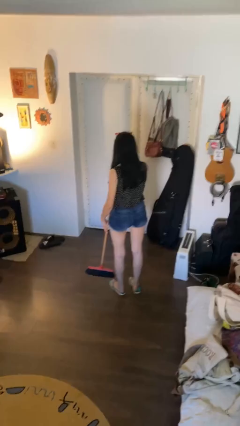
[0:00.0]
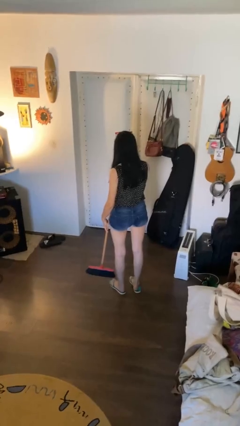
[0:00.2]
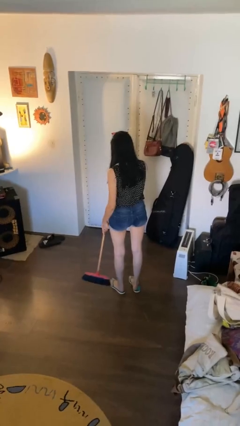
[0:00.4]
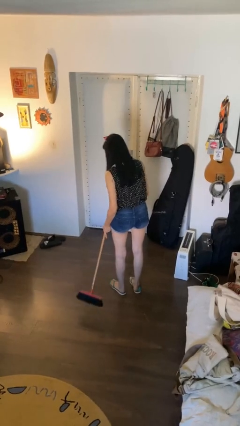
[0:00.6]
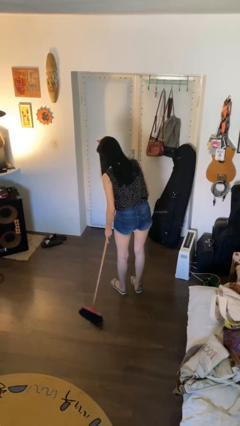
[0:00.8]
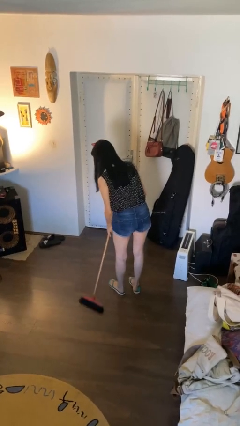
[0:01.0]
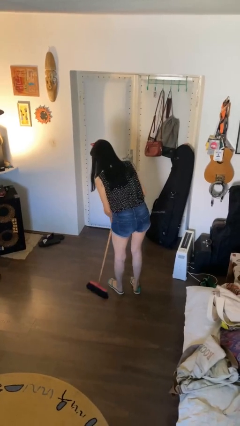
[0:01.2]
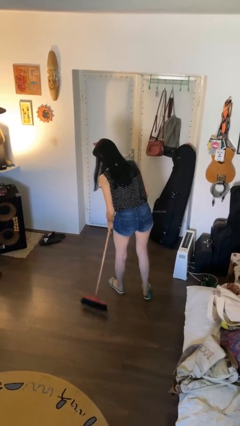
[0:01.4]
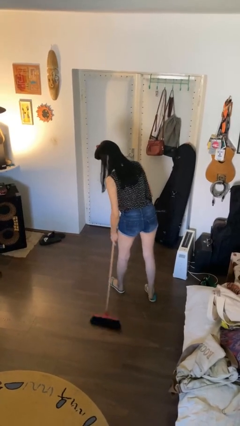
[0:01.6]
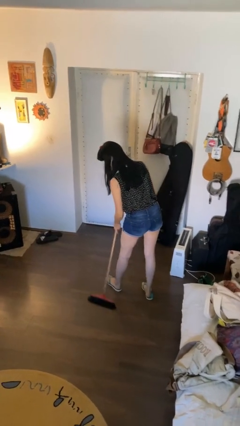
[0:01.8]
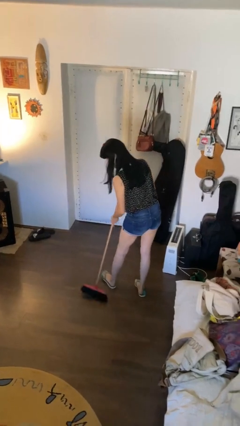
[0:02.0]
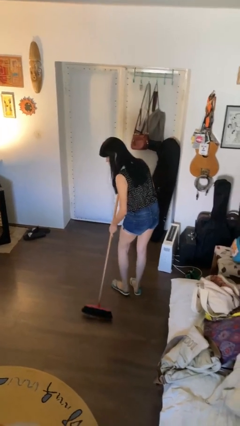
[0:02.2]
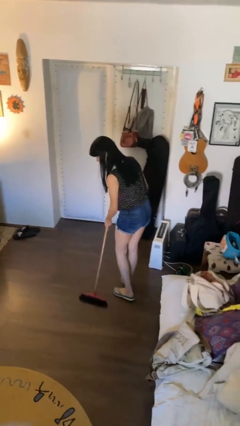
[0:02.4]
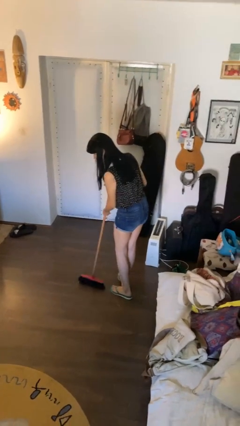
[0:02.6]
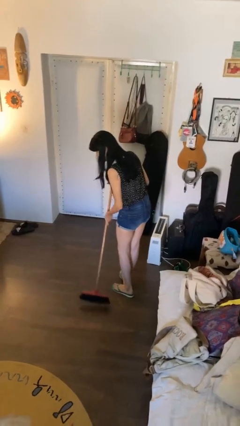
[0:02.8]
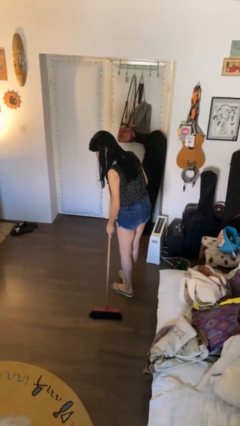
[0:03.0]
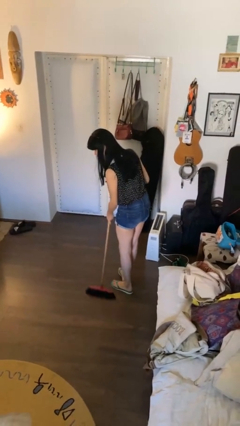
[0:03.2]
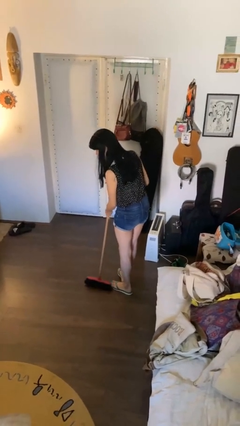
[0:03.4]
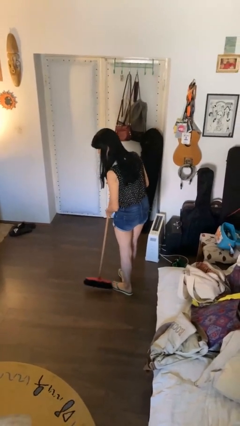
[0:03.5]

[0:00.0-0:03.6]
person sweeps floor

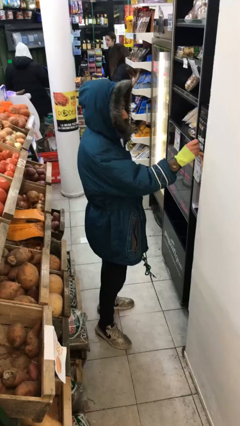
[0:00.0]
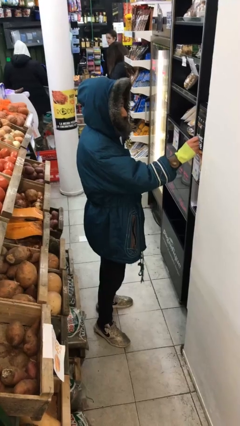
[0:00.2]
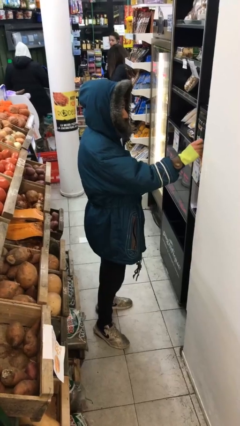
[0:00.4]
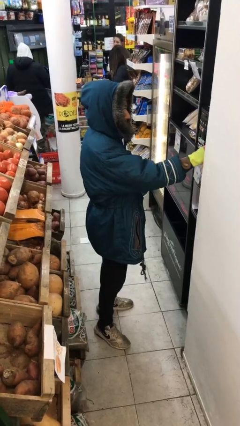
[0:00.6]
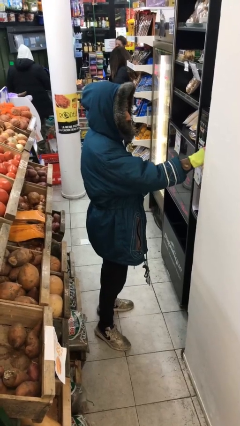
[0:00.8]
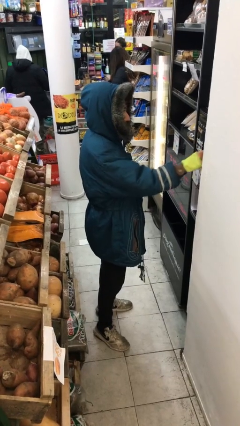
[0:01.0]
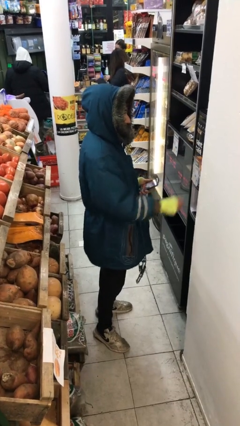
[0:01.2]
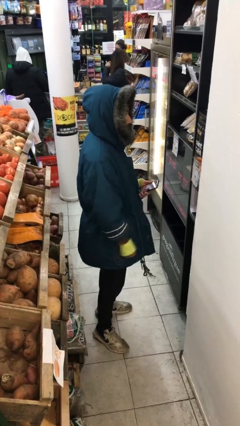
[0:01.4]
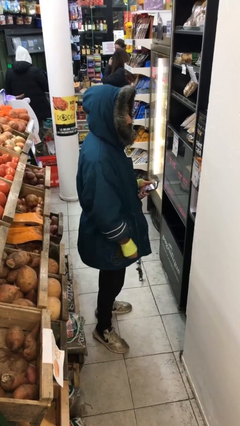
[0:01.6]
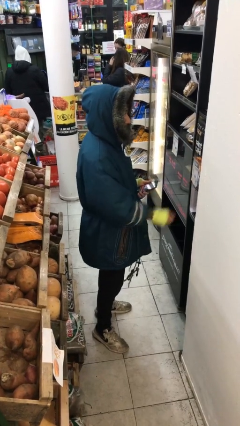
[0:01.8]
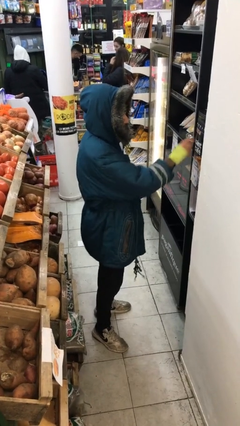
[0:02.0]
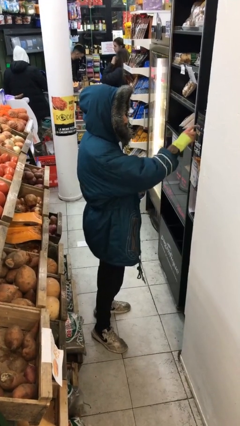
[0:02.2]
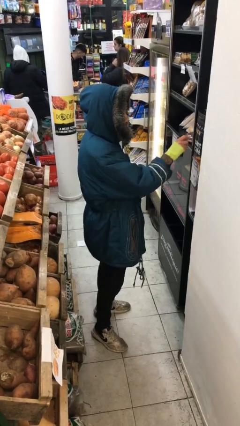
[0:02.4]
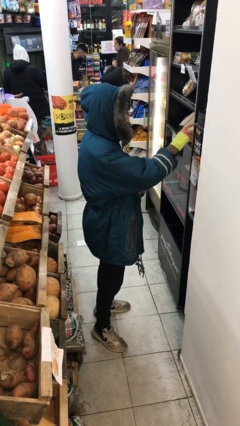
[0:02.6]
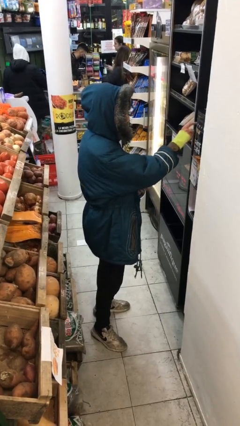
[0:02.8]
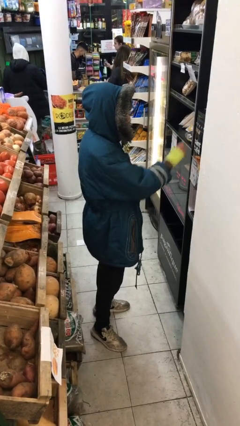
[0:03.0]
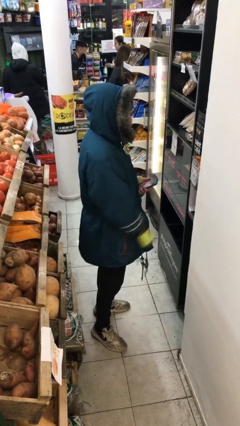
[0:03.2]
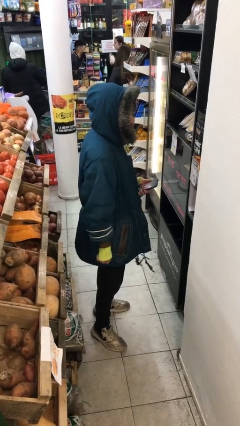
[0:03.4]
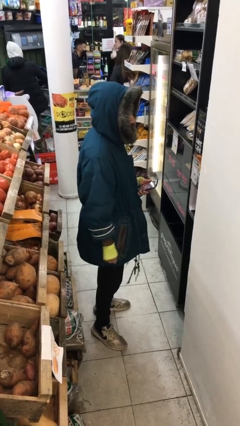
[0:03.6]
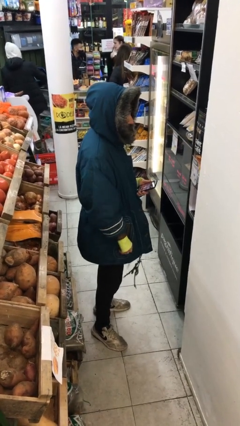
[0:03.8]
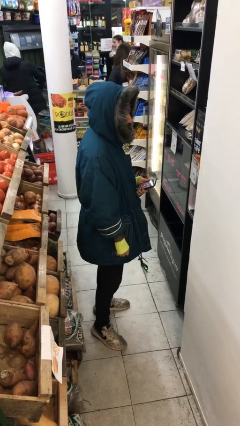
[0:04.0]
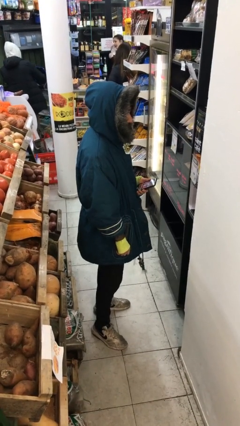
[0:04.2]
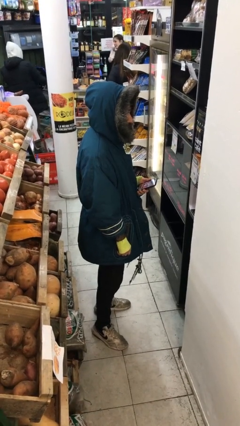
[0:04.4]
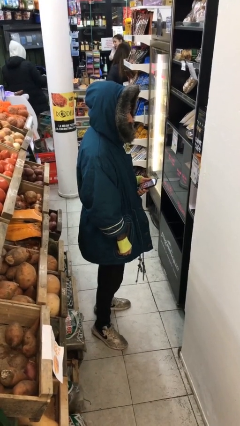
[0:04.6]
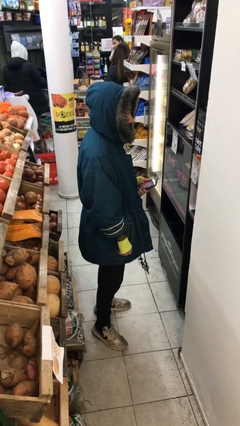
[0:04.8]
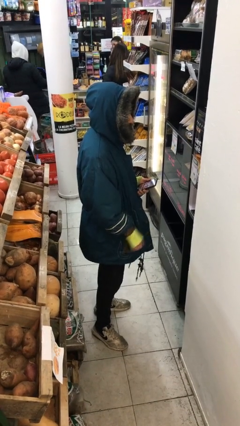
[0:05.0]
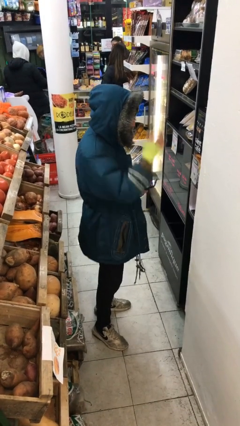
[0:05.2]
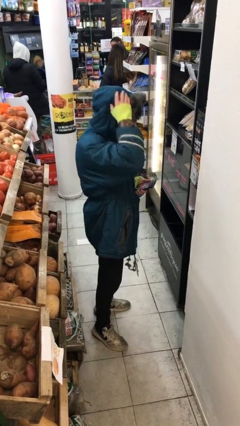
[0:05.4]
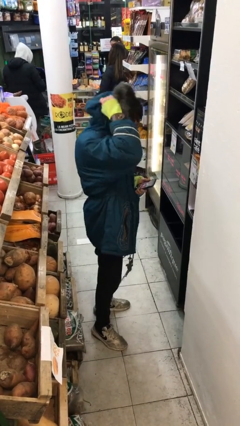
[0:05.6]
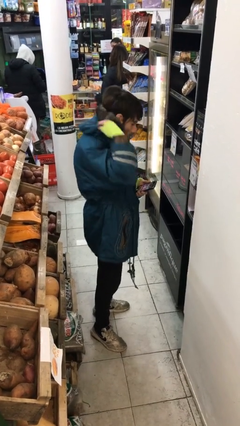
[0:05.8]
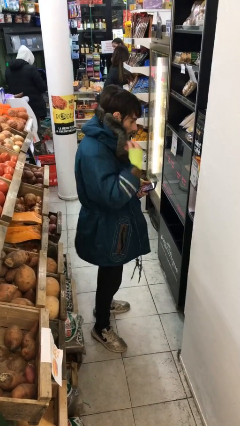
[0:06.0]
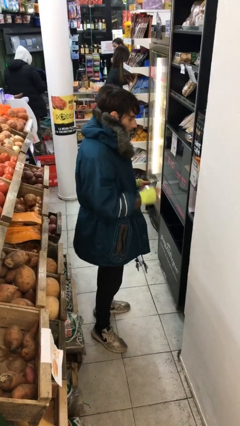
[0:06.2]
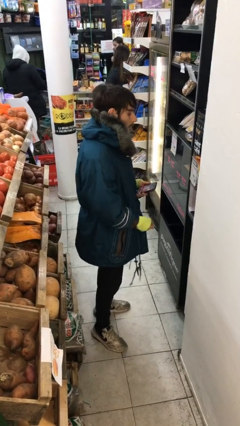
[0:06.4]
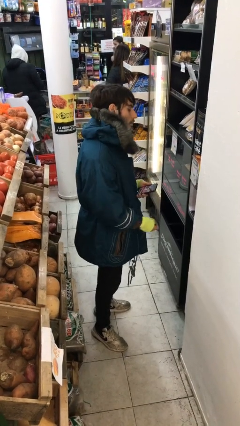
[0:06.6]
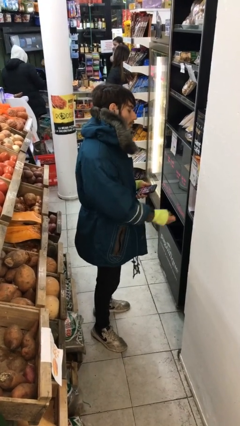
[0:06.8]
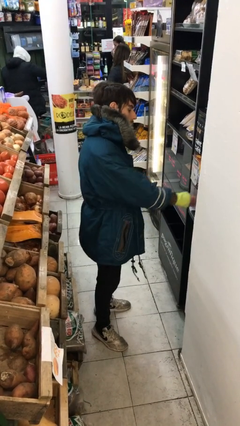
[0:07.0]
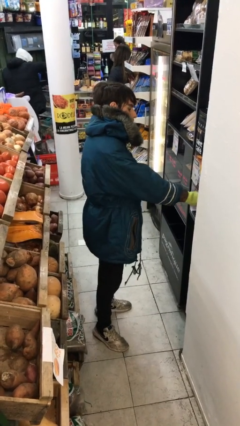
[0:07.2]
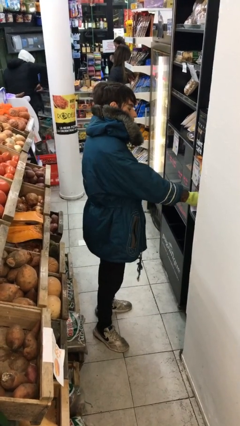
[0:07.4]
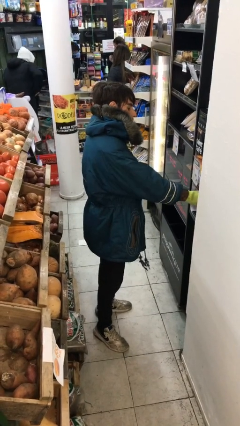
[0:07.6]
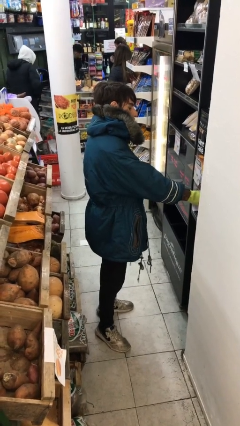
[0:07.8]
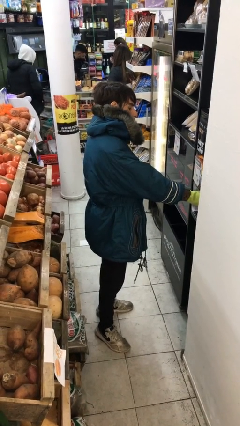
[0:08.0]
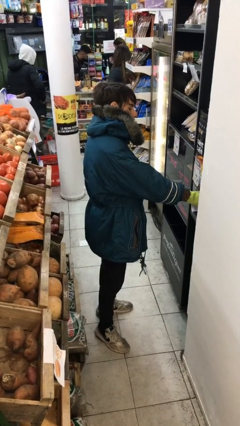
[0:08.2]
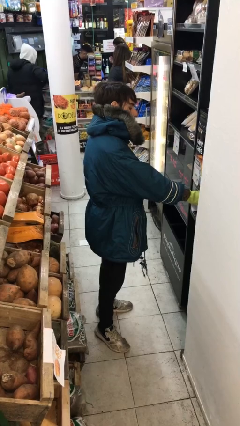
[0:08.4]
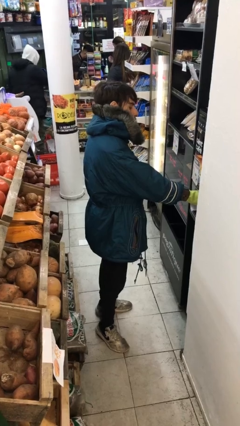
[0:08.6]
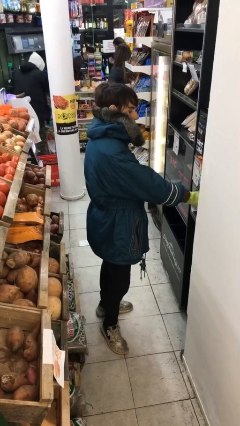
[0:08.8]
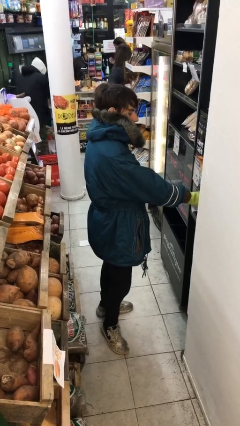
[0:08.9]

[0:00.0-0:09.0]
person purchases from machine

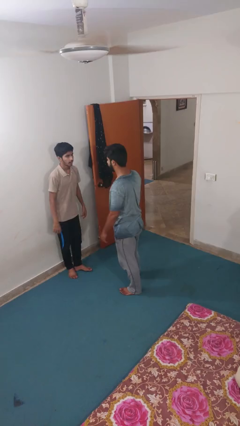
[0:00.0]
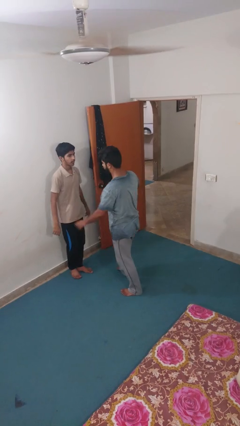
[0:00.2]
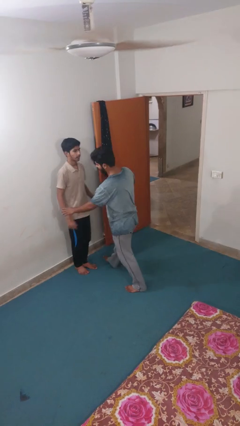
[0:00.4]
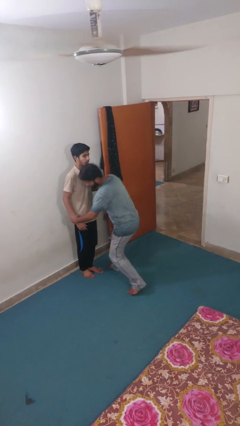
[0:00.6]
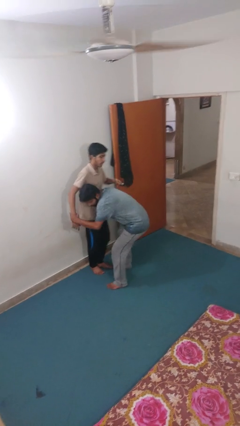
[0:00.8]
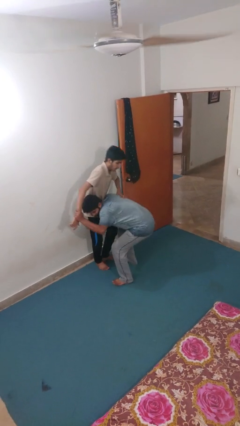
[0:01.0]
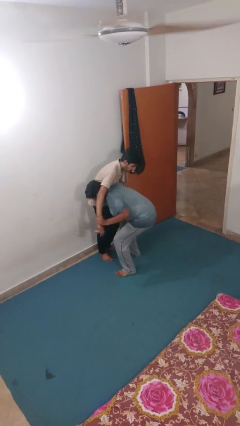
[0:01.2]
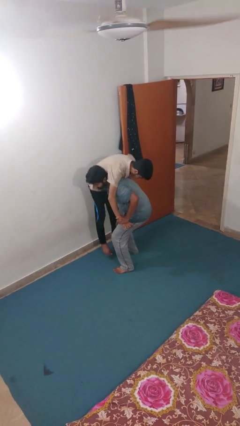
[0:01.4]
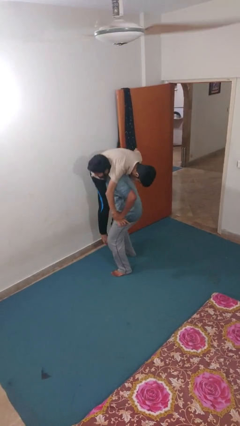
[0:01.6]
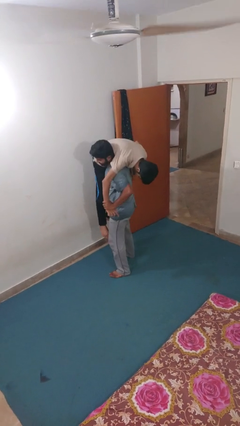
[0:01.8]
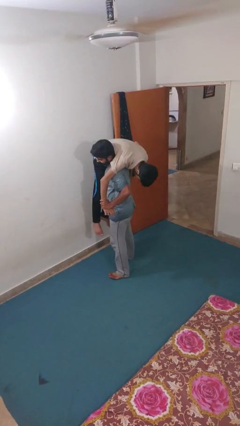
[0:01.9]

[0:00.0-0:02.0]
person carries person over shoulder

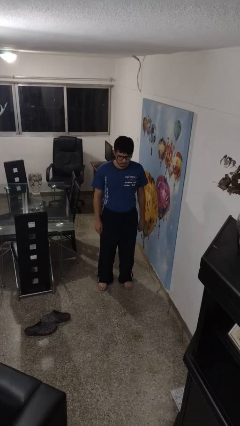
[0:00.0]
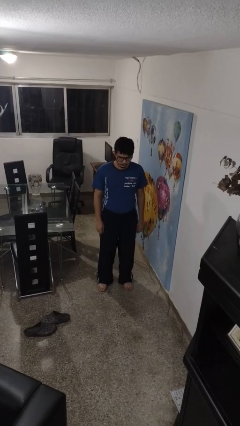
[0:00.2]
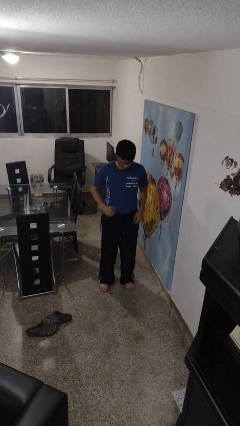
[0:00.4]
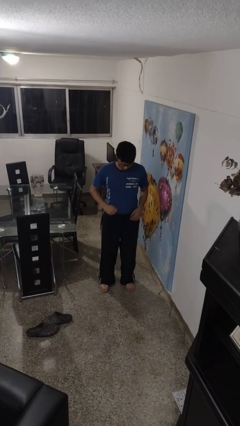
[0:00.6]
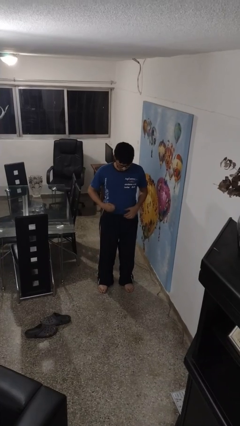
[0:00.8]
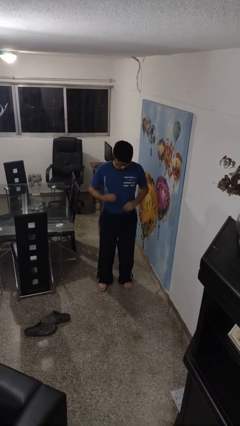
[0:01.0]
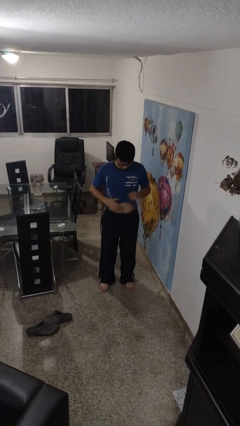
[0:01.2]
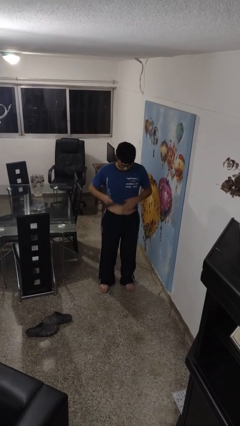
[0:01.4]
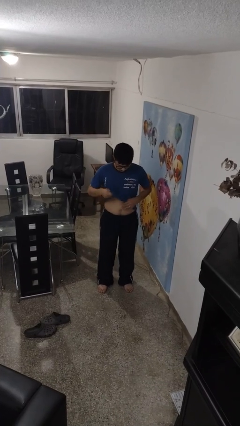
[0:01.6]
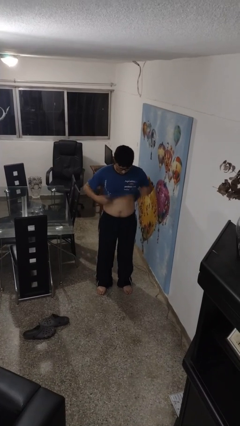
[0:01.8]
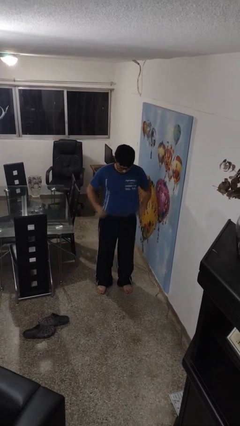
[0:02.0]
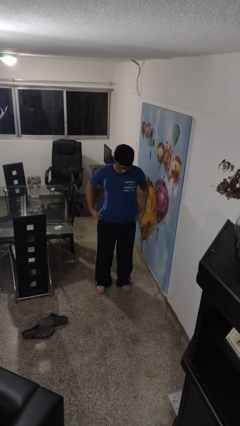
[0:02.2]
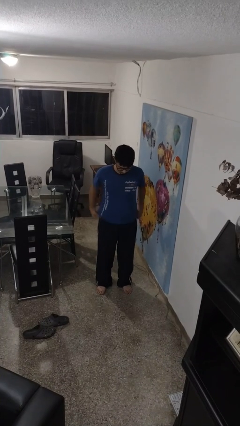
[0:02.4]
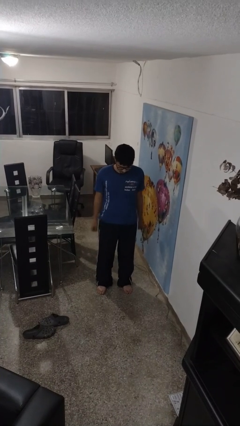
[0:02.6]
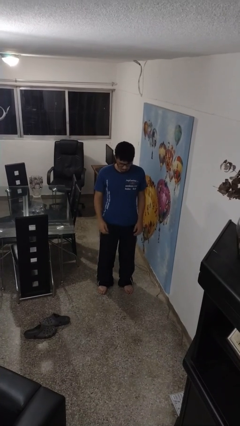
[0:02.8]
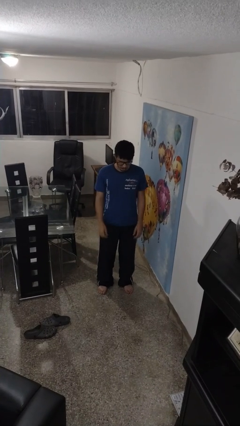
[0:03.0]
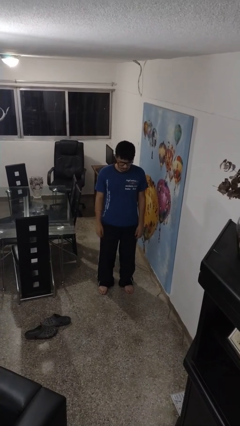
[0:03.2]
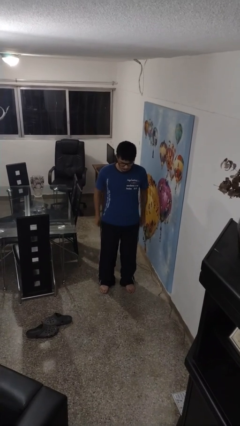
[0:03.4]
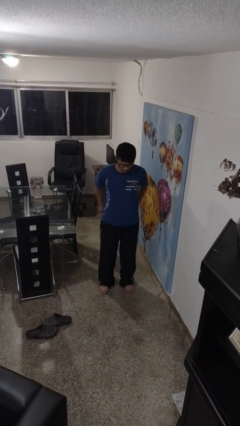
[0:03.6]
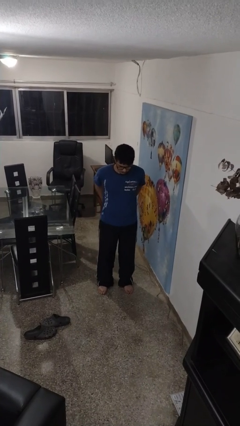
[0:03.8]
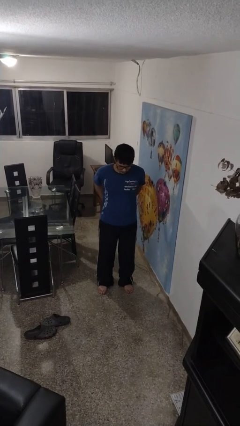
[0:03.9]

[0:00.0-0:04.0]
person untucks shirt
